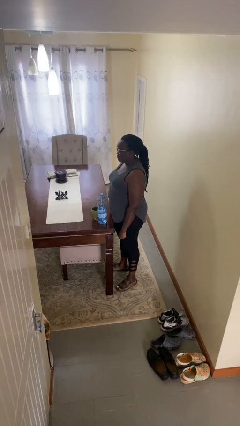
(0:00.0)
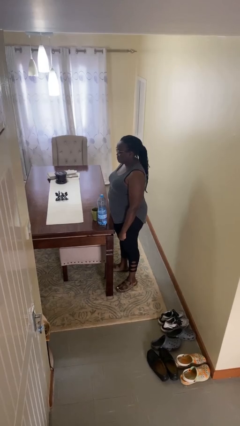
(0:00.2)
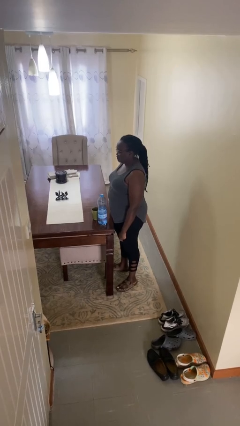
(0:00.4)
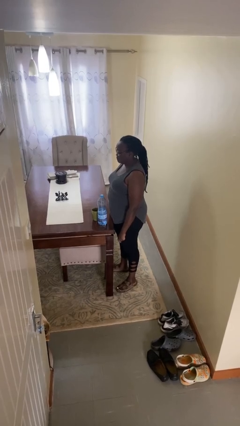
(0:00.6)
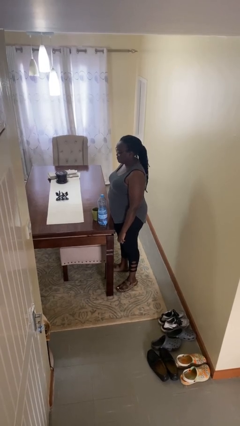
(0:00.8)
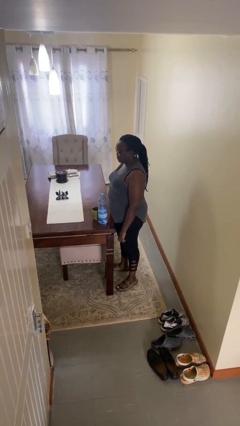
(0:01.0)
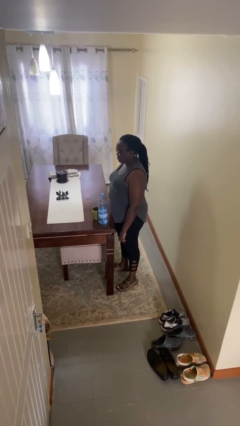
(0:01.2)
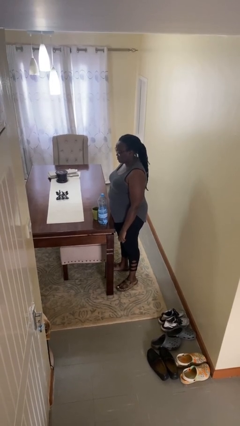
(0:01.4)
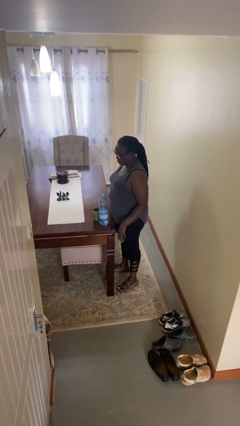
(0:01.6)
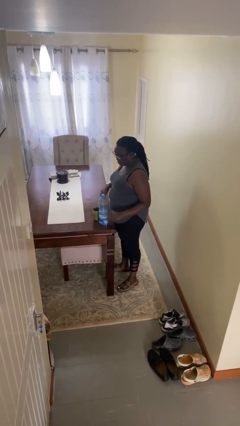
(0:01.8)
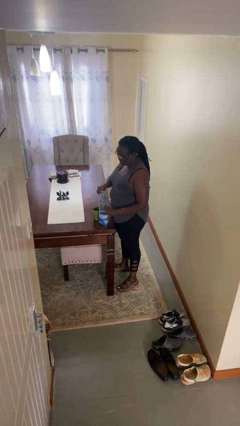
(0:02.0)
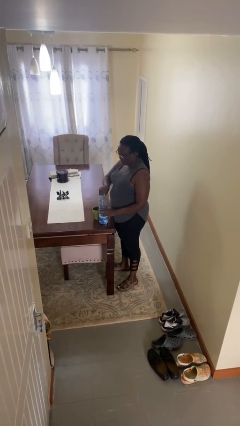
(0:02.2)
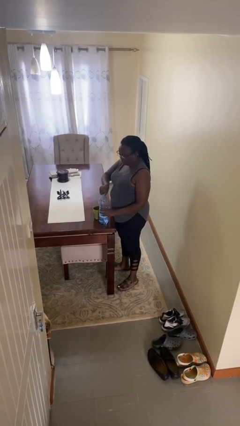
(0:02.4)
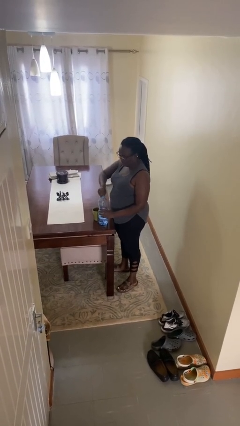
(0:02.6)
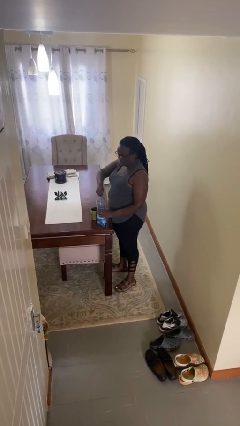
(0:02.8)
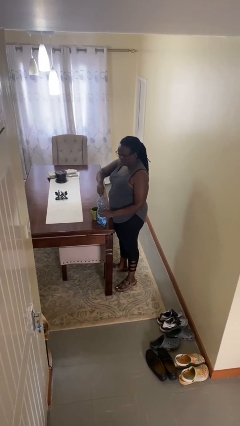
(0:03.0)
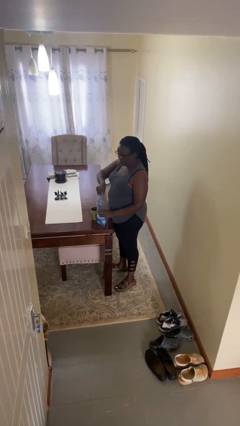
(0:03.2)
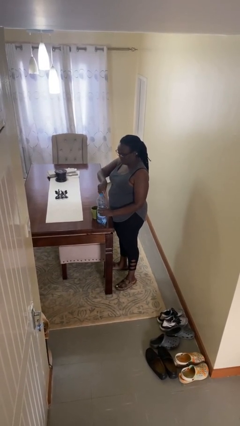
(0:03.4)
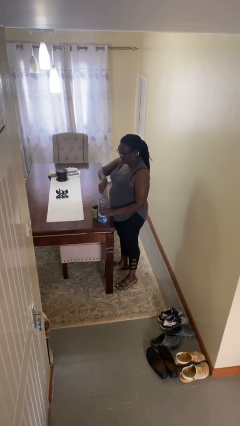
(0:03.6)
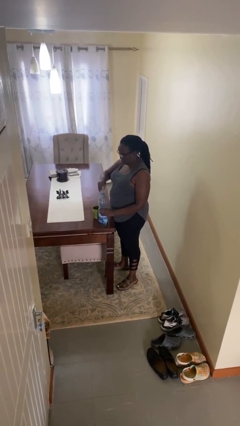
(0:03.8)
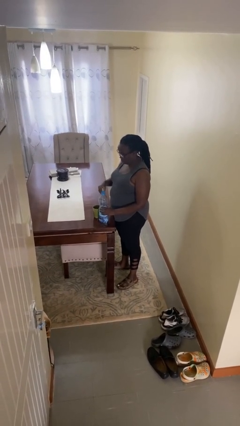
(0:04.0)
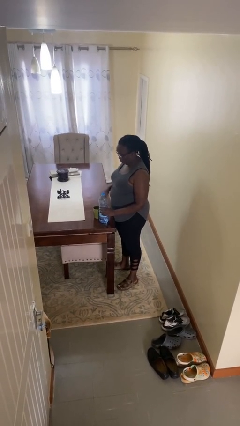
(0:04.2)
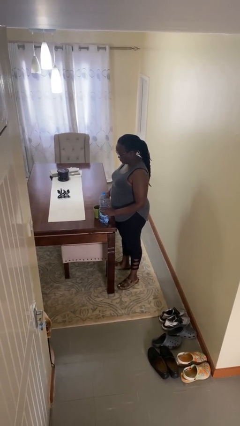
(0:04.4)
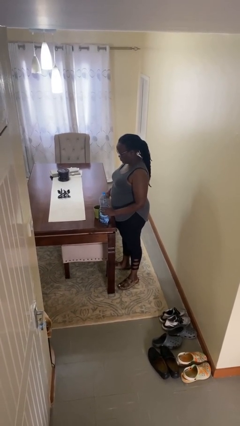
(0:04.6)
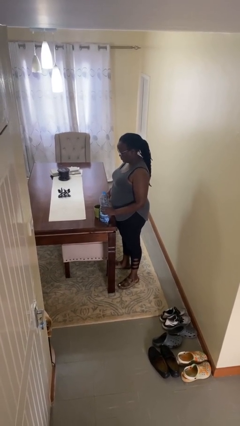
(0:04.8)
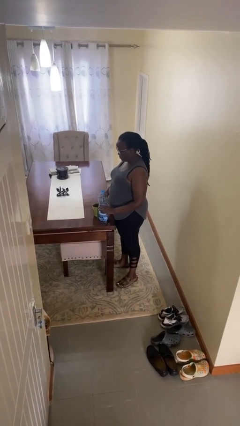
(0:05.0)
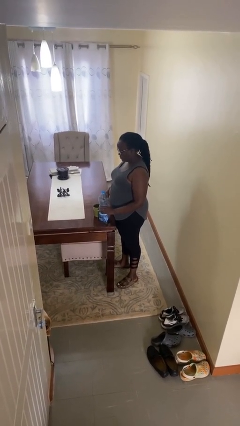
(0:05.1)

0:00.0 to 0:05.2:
person unscrews lid from bottle

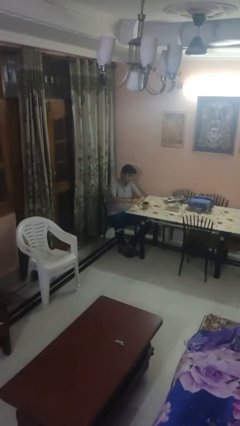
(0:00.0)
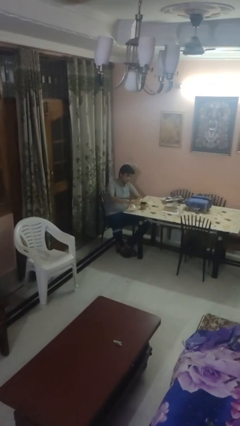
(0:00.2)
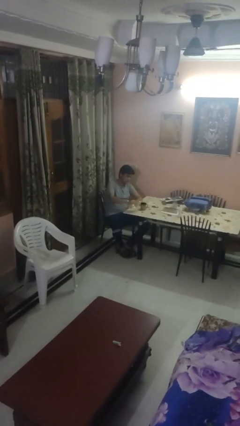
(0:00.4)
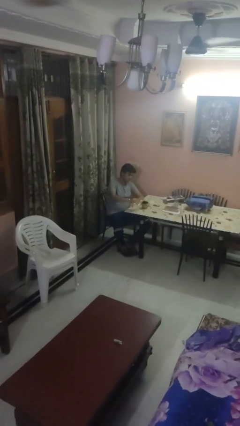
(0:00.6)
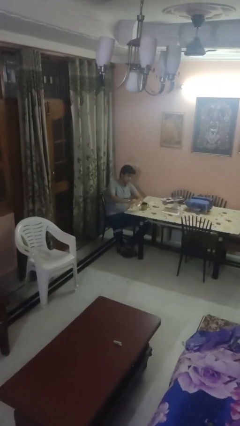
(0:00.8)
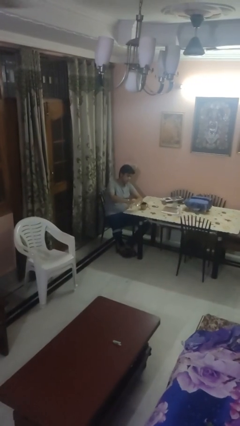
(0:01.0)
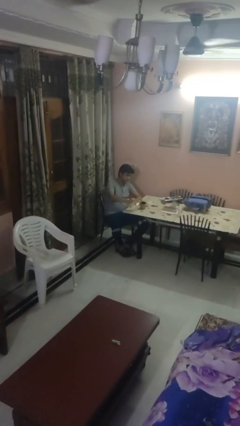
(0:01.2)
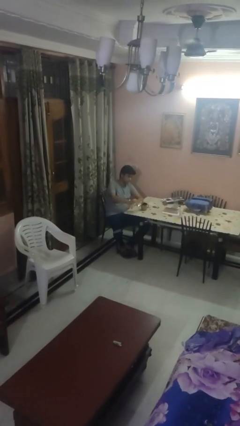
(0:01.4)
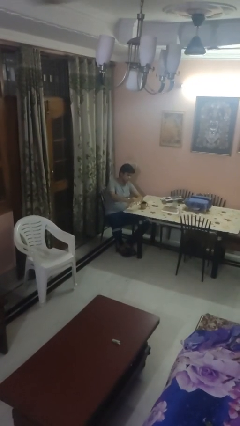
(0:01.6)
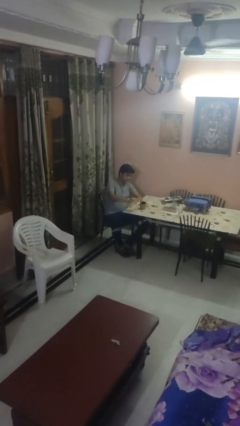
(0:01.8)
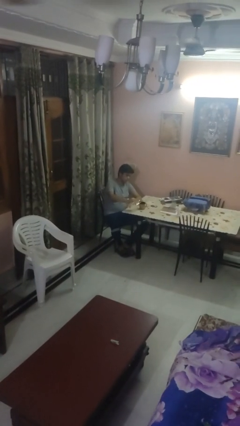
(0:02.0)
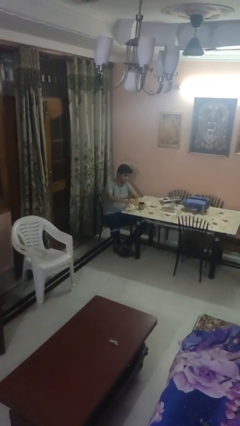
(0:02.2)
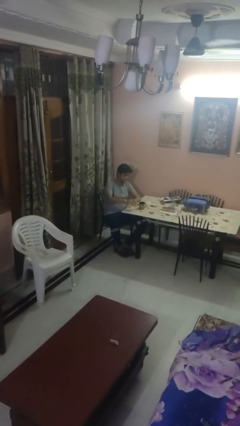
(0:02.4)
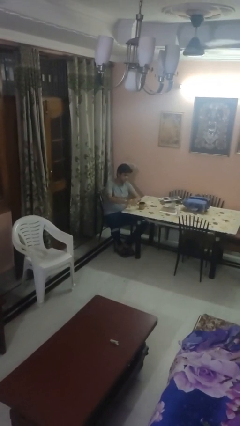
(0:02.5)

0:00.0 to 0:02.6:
person pours liquid into cup

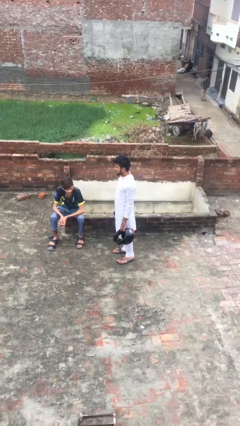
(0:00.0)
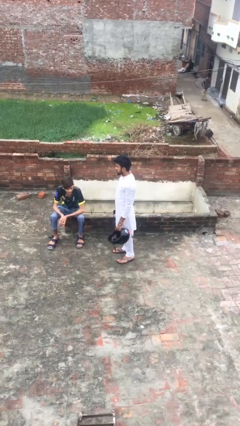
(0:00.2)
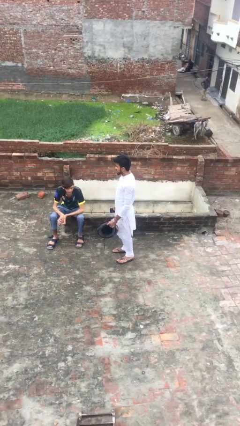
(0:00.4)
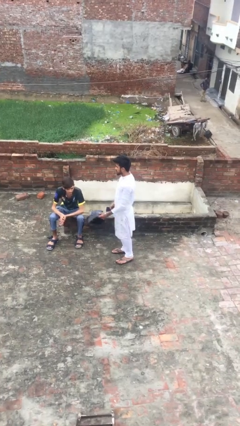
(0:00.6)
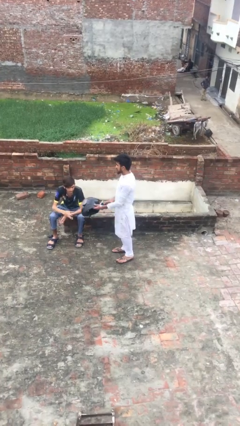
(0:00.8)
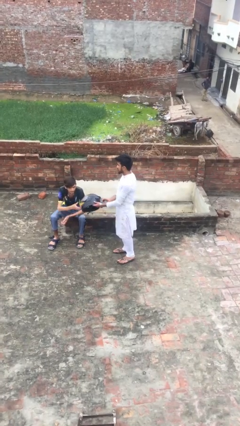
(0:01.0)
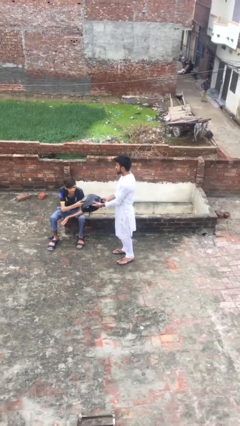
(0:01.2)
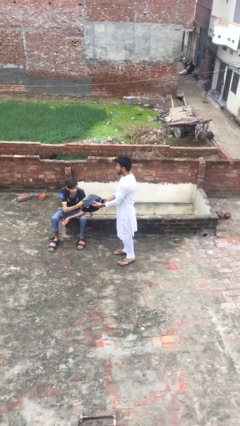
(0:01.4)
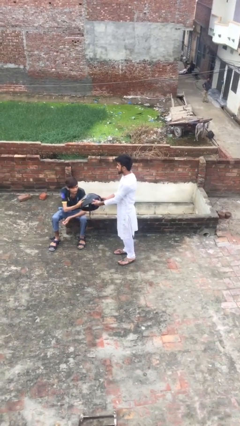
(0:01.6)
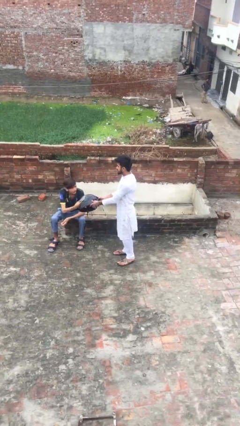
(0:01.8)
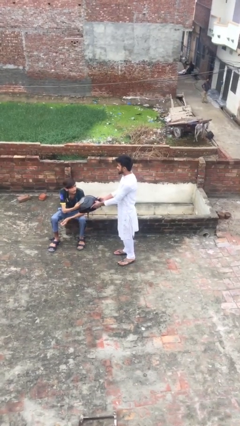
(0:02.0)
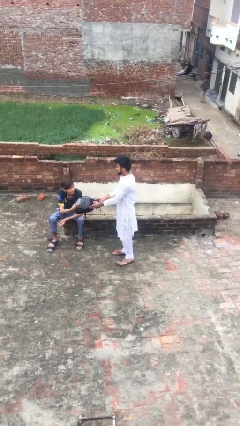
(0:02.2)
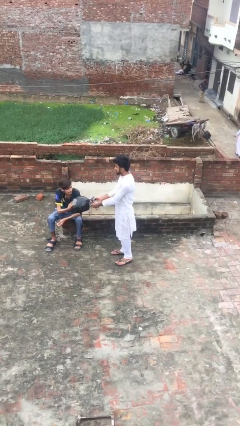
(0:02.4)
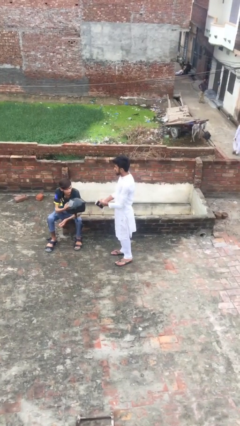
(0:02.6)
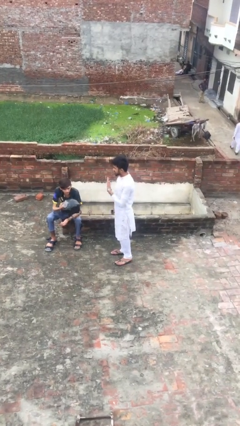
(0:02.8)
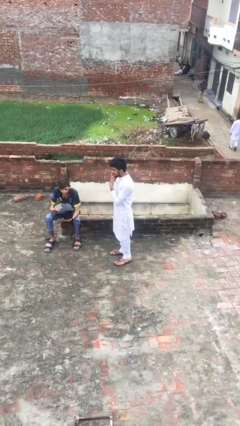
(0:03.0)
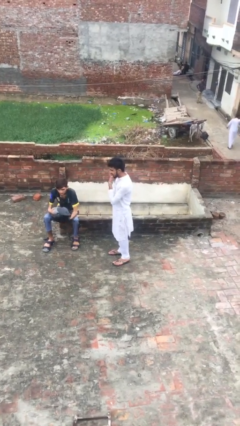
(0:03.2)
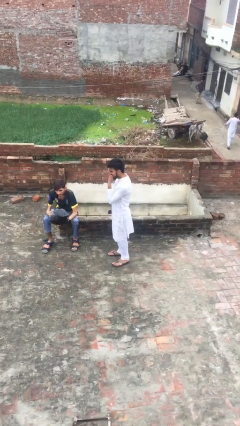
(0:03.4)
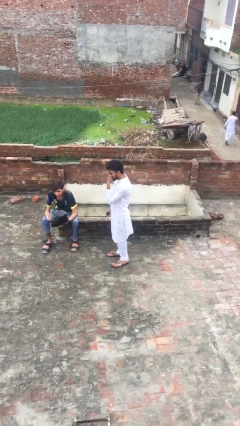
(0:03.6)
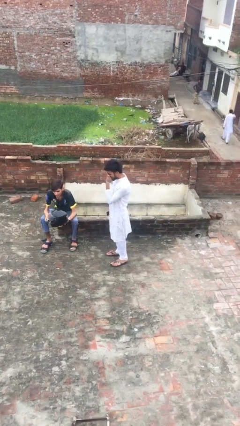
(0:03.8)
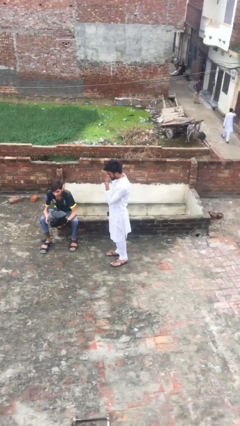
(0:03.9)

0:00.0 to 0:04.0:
person transfers object to person

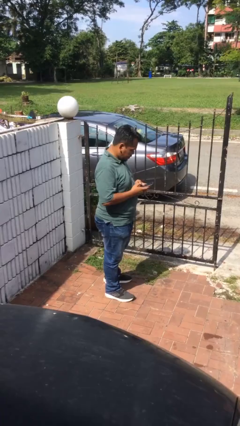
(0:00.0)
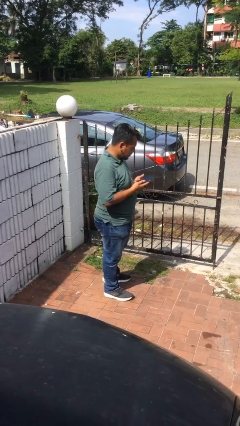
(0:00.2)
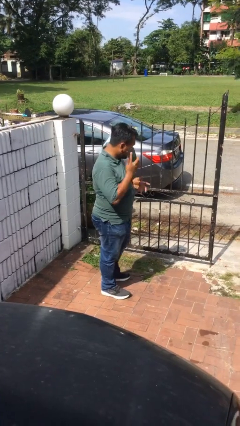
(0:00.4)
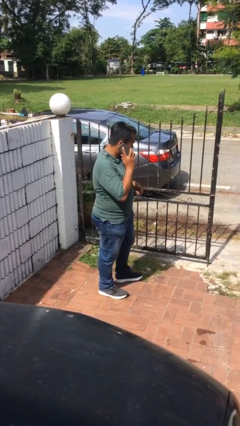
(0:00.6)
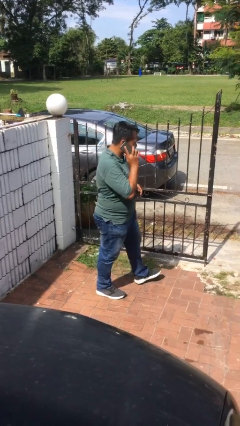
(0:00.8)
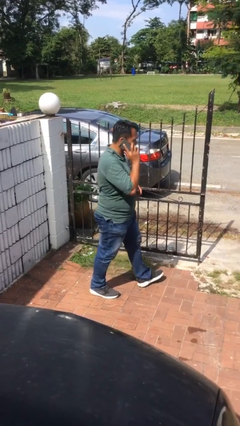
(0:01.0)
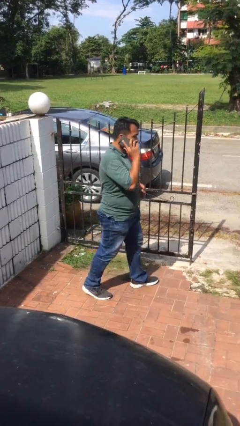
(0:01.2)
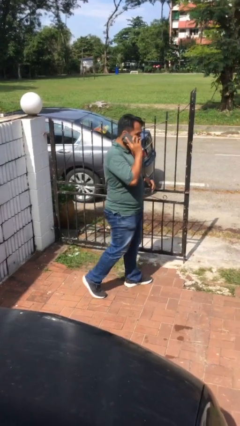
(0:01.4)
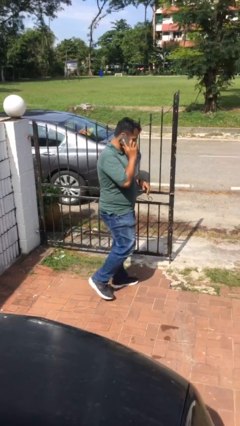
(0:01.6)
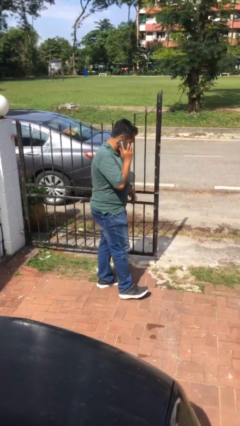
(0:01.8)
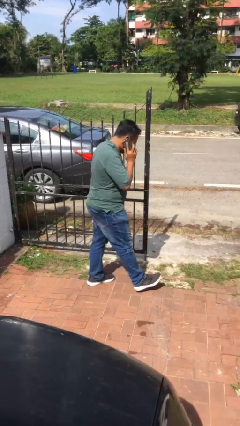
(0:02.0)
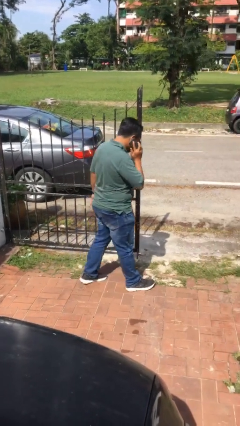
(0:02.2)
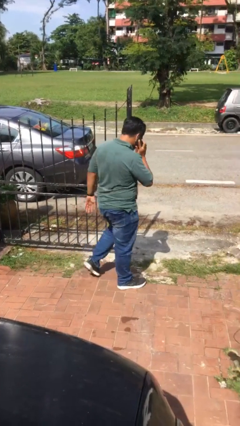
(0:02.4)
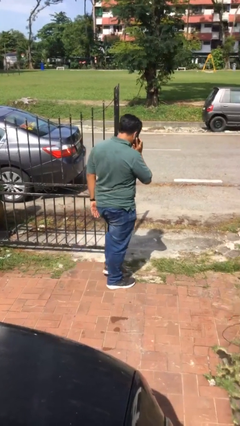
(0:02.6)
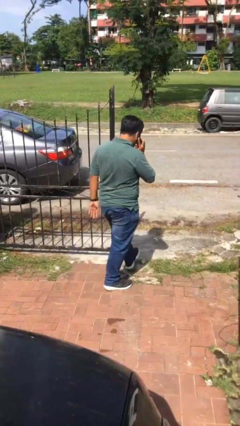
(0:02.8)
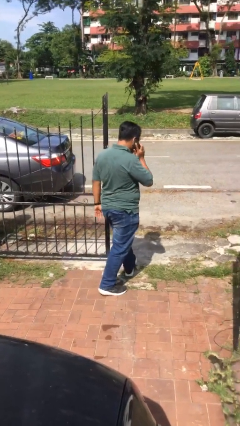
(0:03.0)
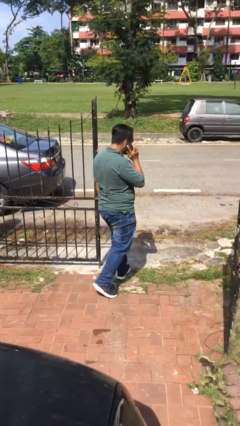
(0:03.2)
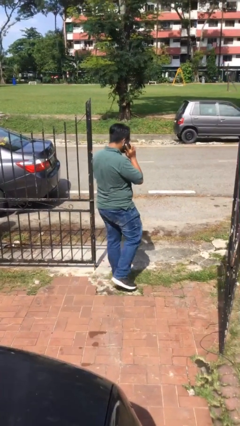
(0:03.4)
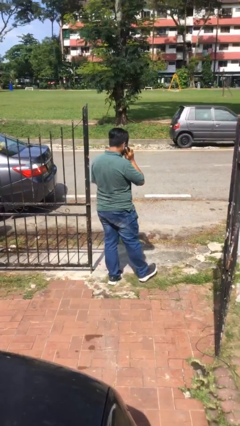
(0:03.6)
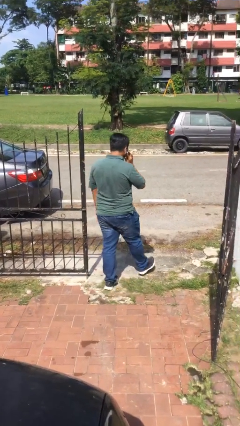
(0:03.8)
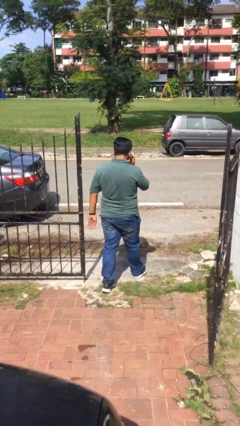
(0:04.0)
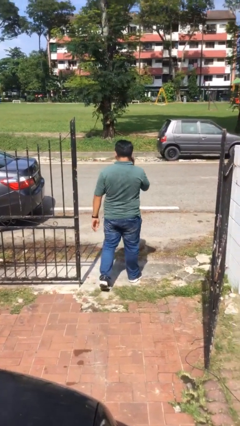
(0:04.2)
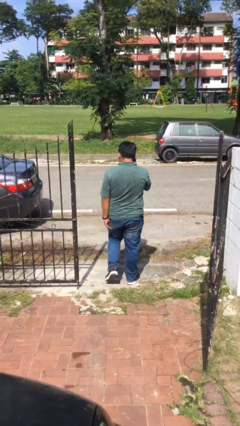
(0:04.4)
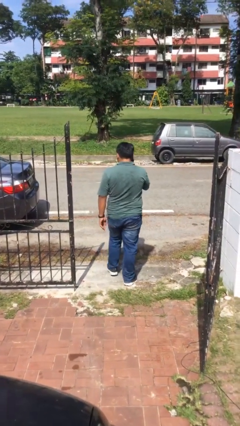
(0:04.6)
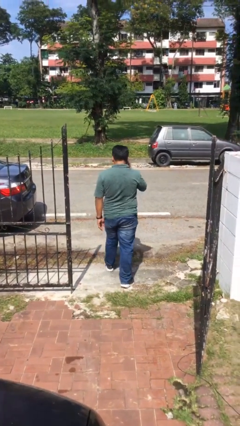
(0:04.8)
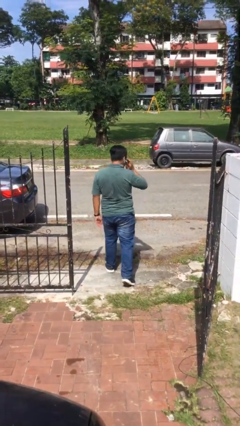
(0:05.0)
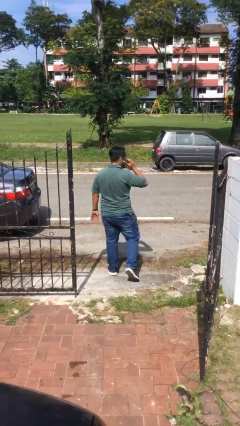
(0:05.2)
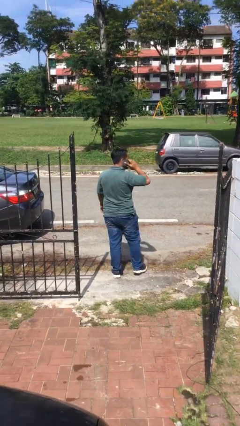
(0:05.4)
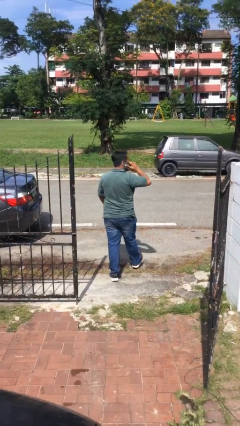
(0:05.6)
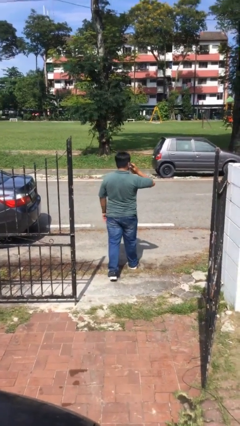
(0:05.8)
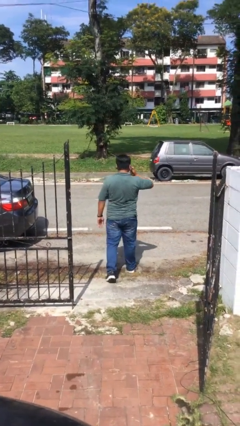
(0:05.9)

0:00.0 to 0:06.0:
person exits scene through structure
